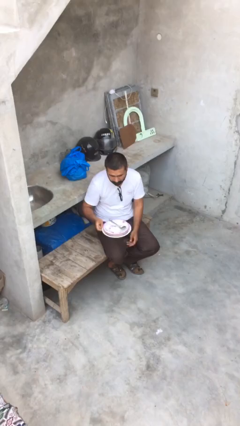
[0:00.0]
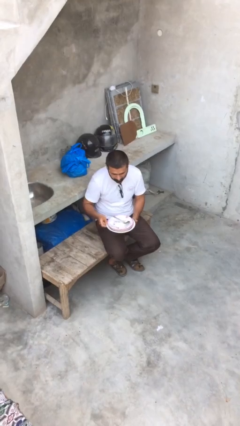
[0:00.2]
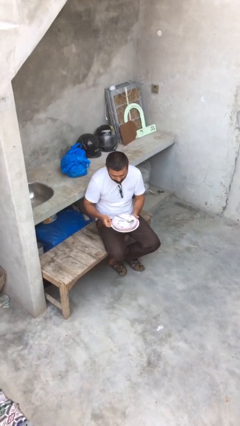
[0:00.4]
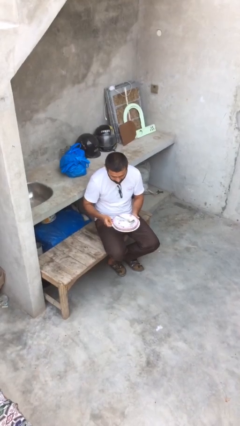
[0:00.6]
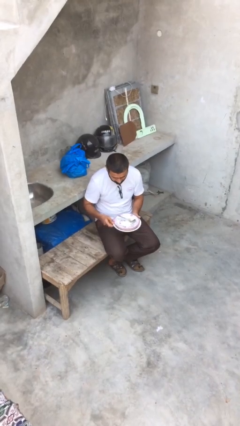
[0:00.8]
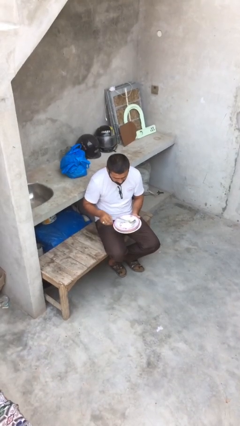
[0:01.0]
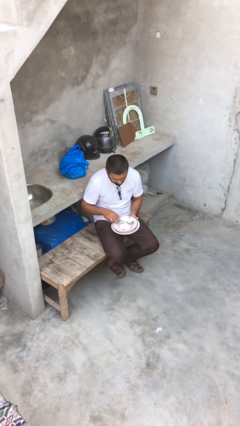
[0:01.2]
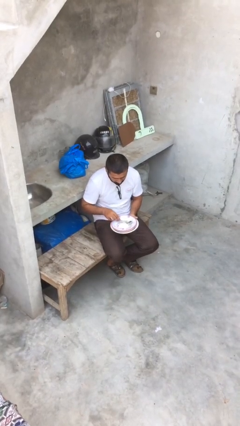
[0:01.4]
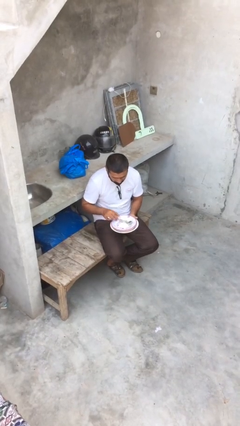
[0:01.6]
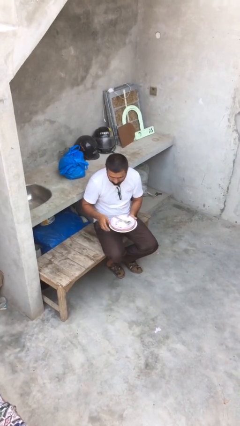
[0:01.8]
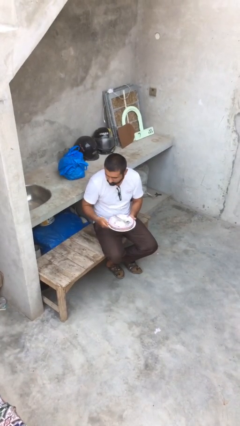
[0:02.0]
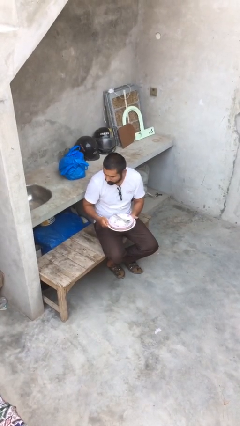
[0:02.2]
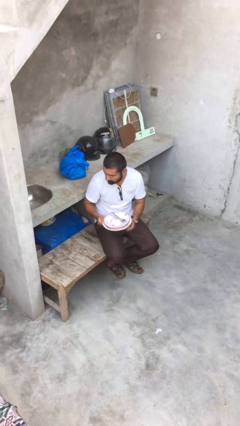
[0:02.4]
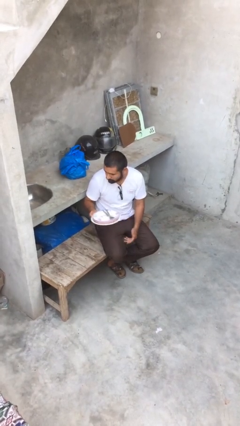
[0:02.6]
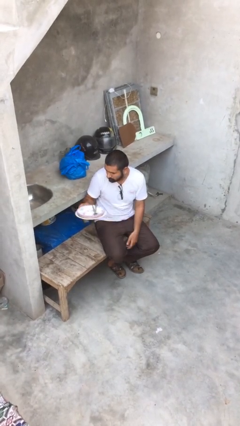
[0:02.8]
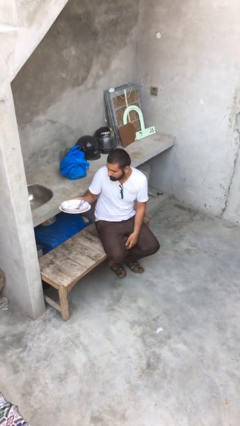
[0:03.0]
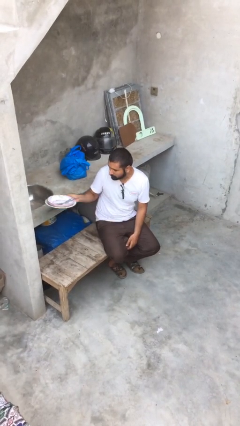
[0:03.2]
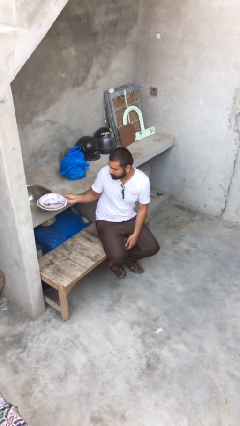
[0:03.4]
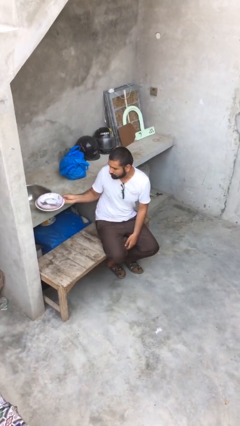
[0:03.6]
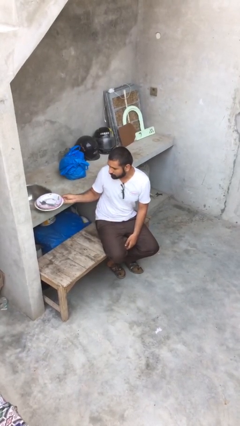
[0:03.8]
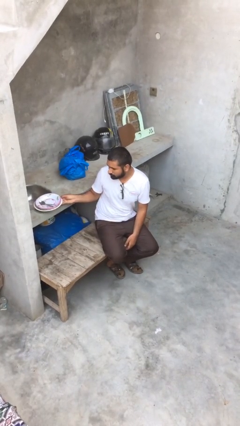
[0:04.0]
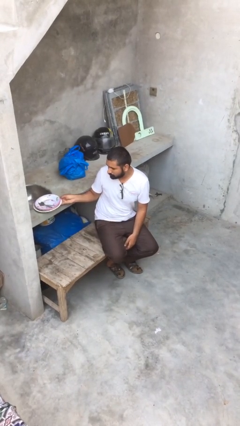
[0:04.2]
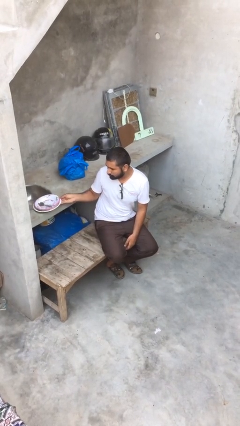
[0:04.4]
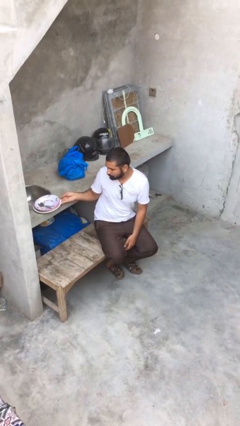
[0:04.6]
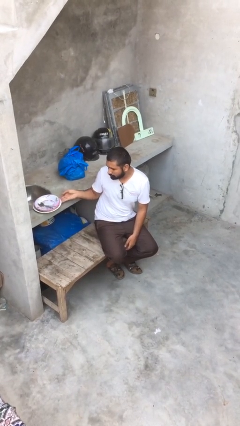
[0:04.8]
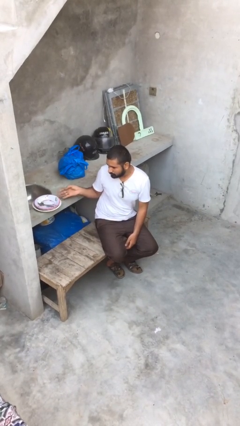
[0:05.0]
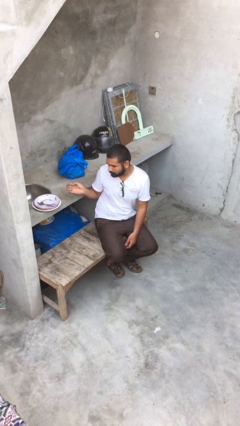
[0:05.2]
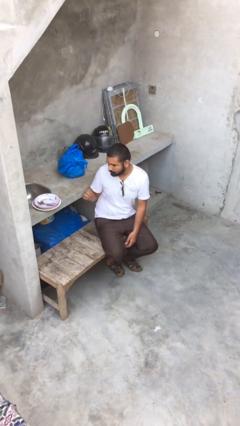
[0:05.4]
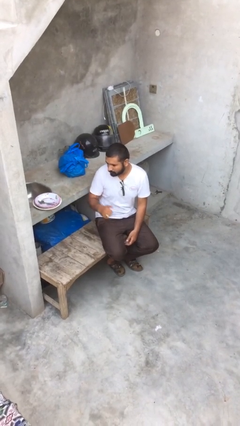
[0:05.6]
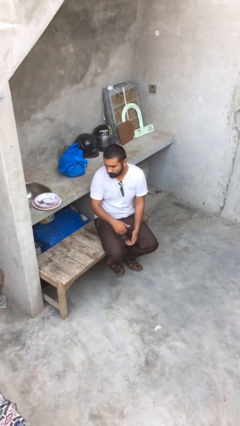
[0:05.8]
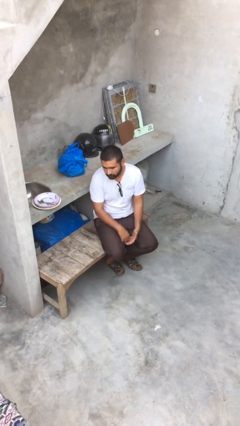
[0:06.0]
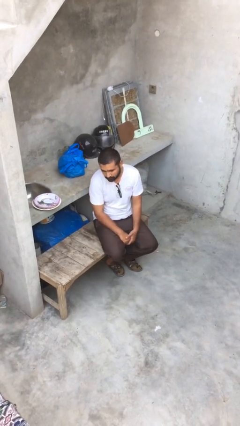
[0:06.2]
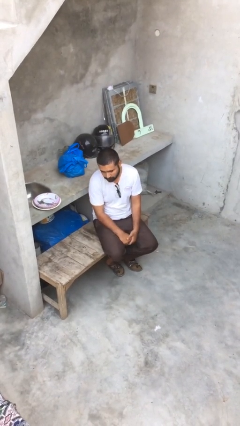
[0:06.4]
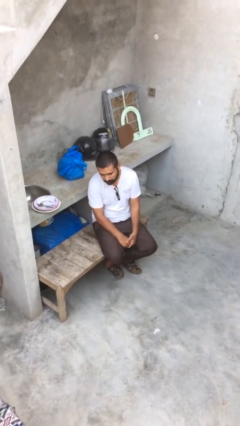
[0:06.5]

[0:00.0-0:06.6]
person puts down object on shelf

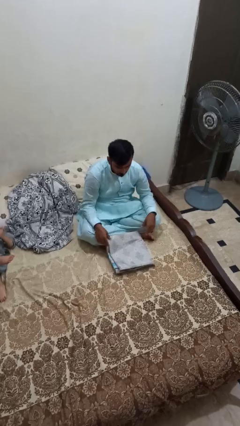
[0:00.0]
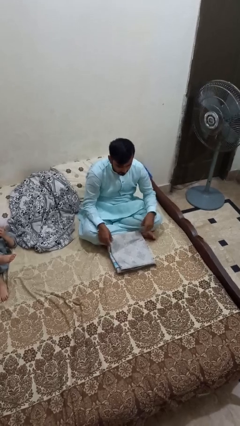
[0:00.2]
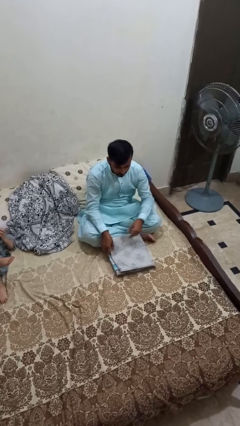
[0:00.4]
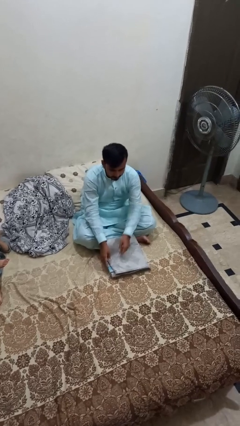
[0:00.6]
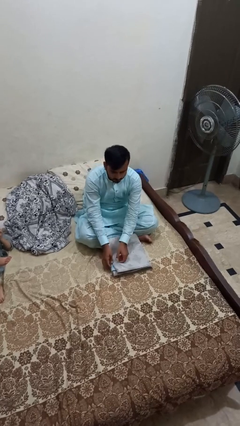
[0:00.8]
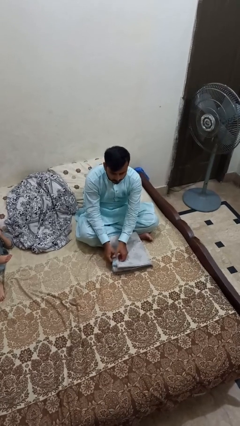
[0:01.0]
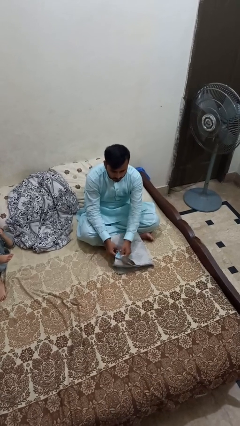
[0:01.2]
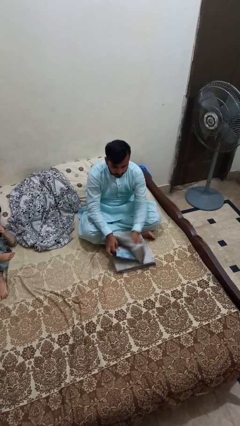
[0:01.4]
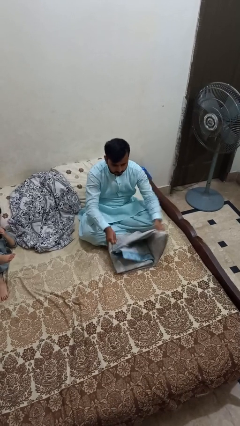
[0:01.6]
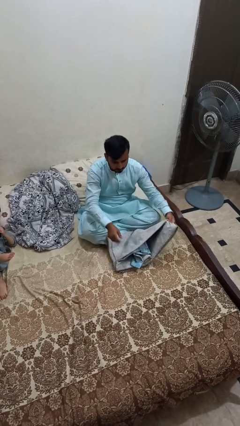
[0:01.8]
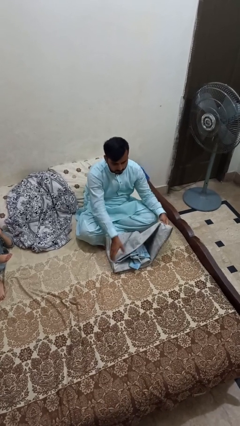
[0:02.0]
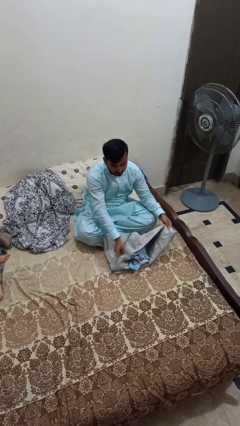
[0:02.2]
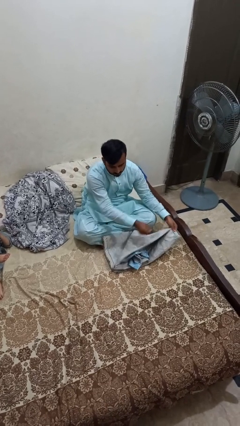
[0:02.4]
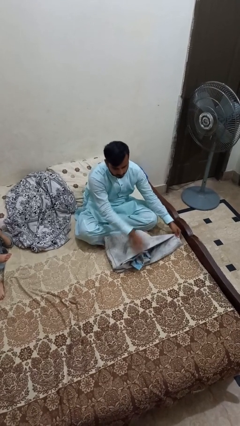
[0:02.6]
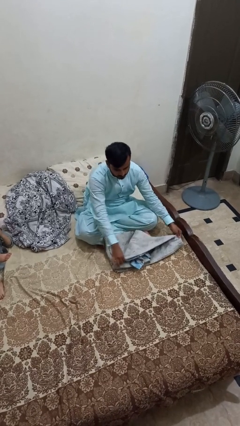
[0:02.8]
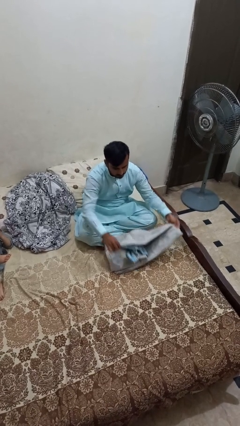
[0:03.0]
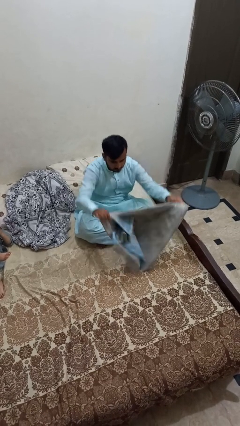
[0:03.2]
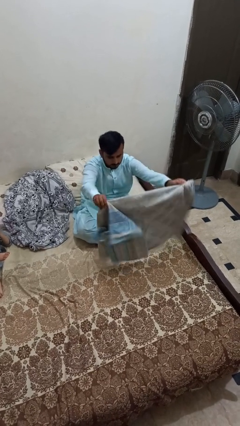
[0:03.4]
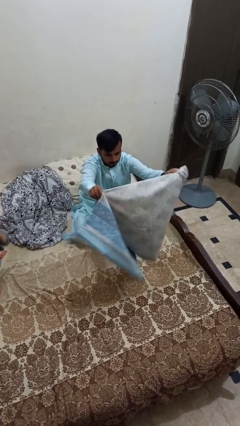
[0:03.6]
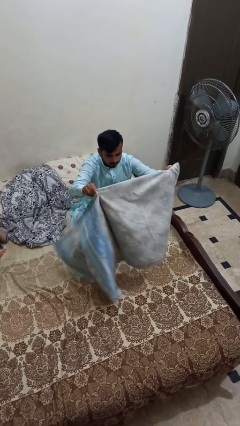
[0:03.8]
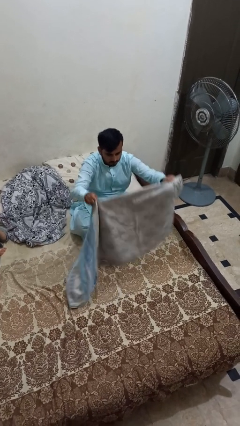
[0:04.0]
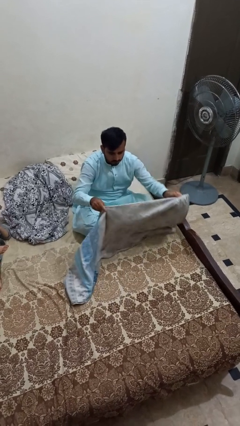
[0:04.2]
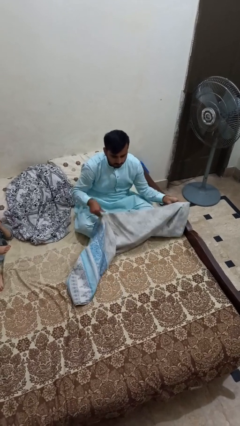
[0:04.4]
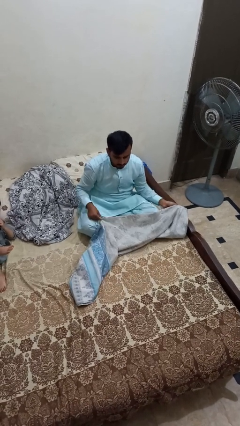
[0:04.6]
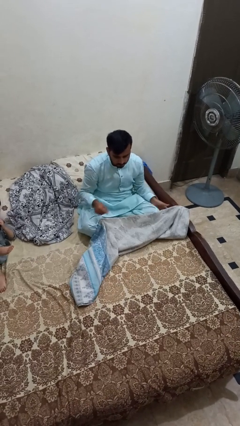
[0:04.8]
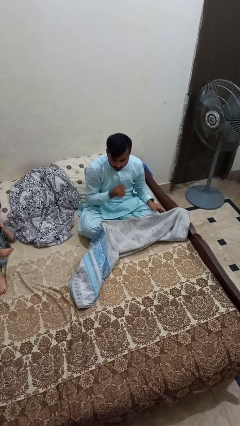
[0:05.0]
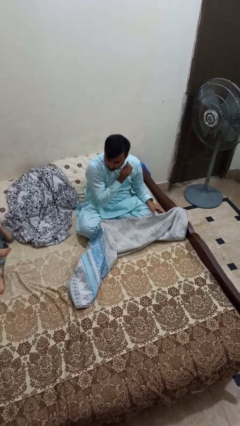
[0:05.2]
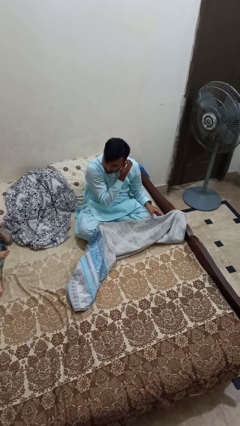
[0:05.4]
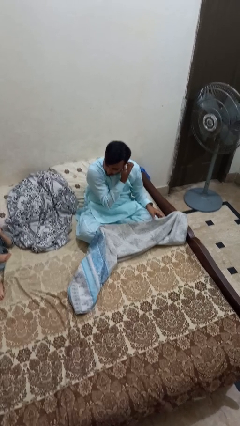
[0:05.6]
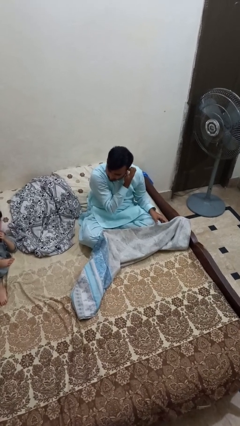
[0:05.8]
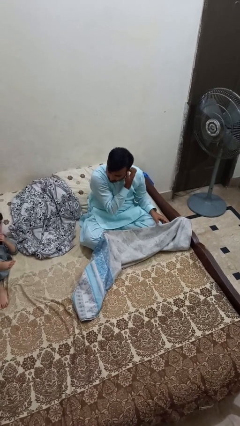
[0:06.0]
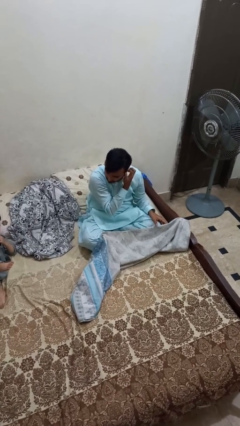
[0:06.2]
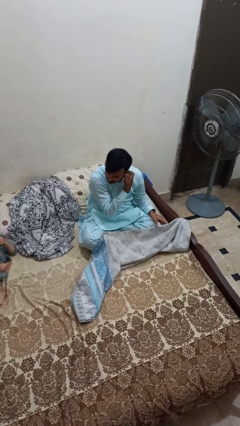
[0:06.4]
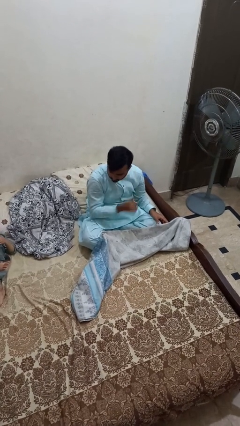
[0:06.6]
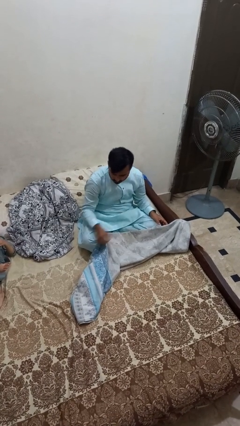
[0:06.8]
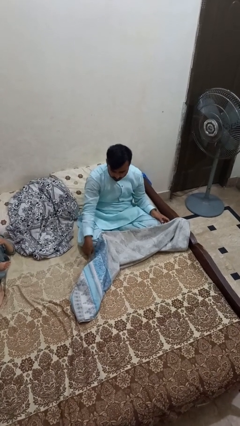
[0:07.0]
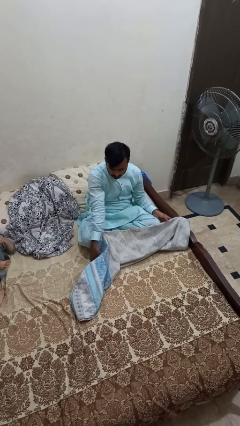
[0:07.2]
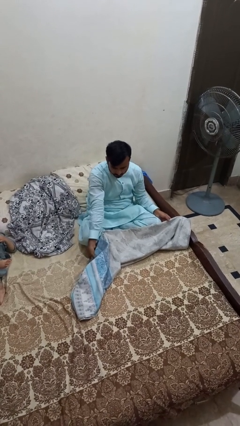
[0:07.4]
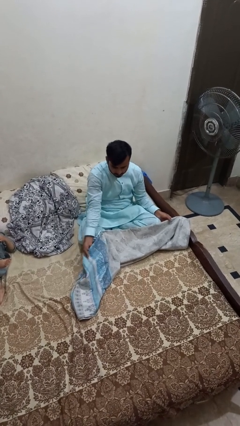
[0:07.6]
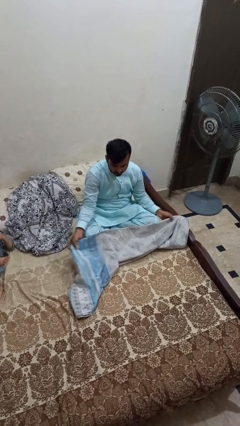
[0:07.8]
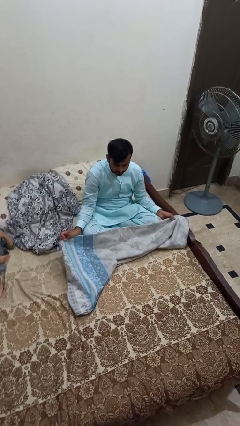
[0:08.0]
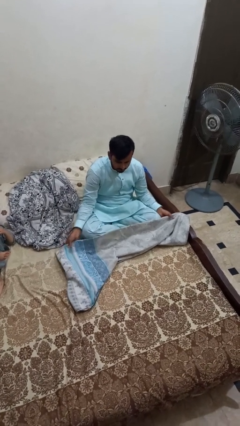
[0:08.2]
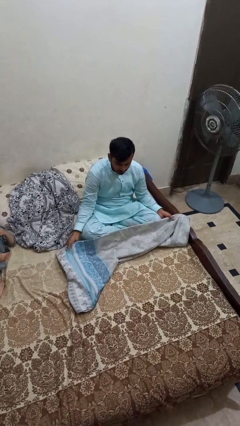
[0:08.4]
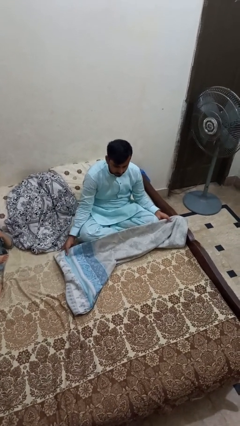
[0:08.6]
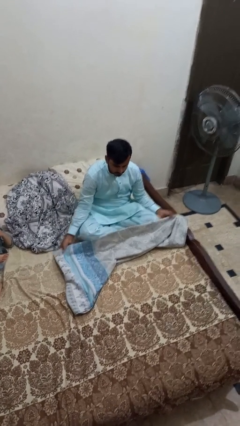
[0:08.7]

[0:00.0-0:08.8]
person unfolds blanket

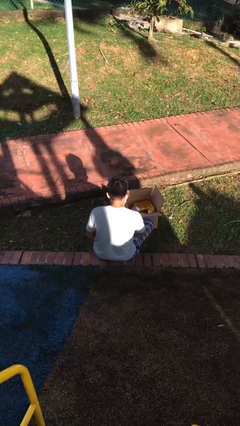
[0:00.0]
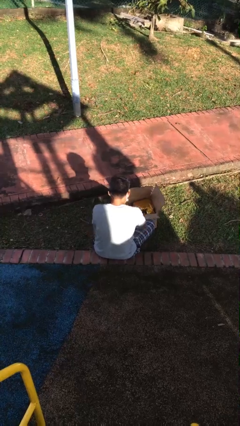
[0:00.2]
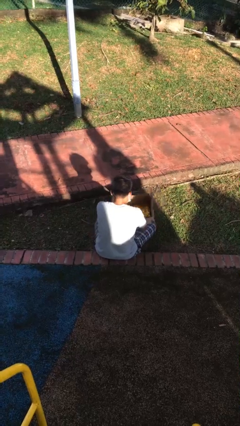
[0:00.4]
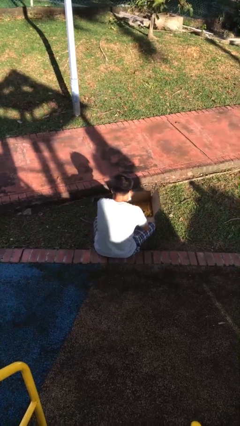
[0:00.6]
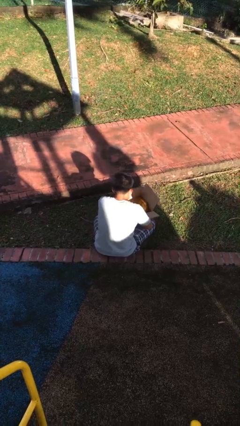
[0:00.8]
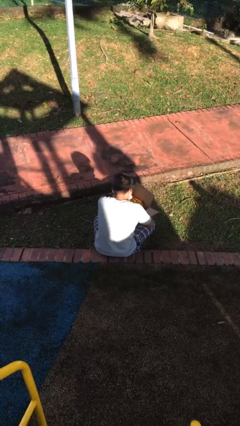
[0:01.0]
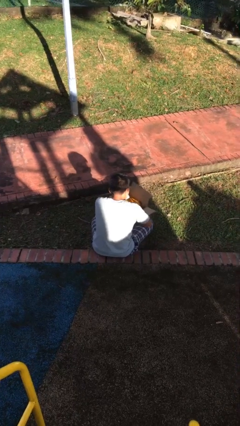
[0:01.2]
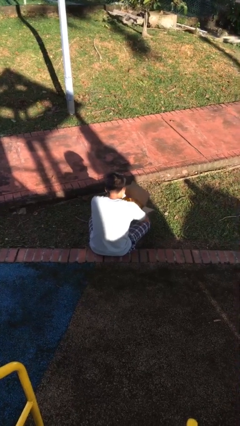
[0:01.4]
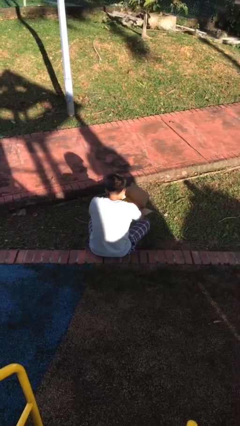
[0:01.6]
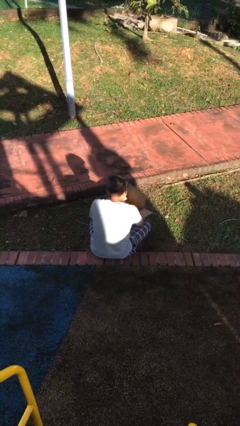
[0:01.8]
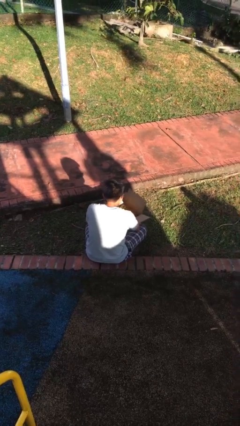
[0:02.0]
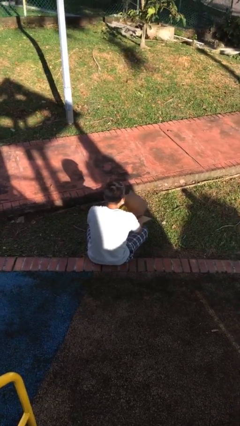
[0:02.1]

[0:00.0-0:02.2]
person searches in box

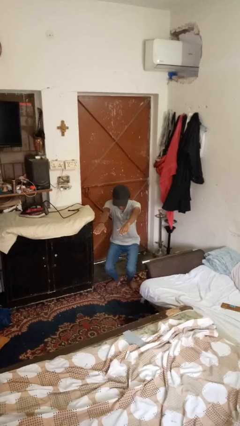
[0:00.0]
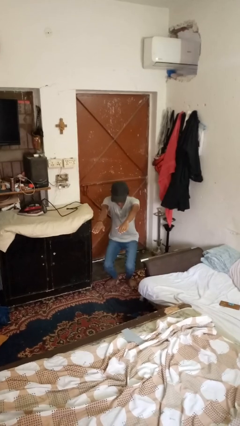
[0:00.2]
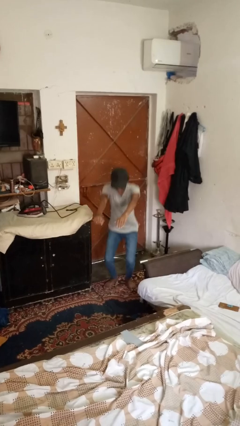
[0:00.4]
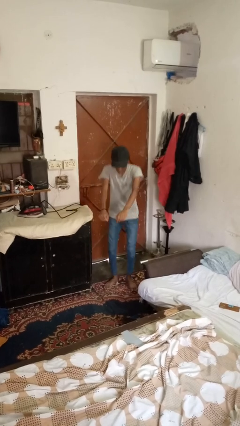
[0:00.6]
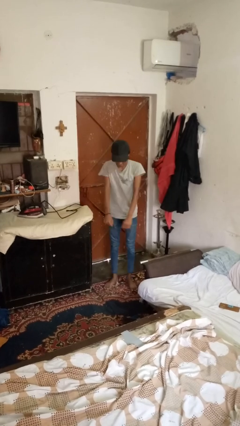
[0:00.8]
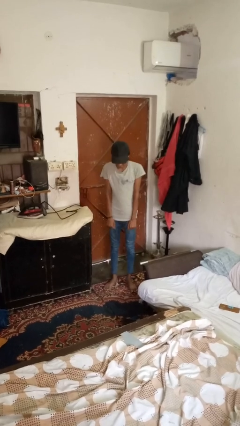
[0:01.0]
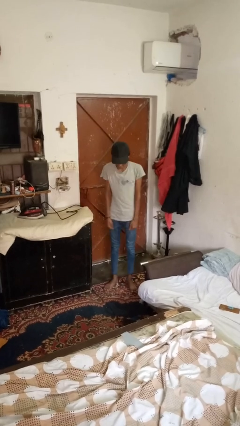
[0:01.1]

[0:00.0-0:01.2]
person stands up
